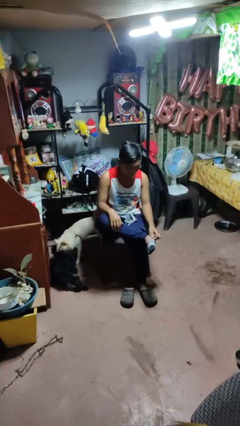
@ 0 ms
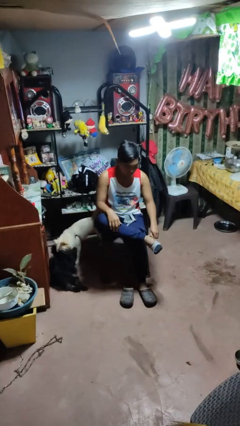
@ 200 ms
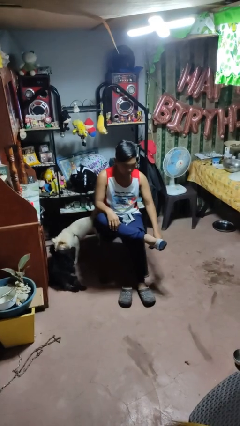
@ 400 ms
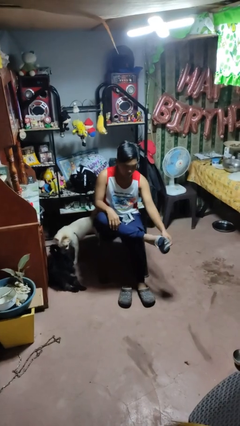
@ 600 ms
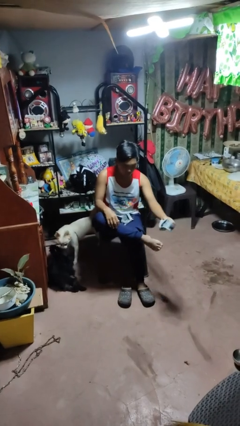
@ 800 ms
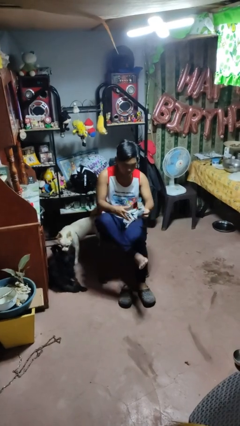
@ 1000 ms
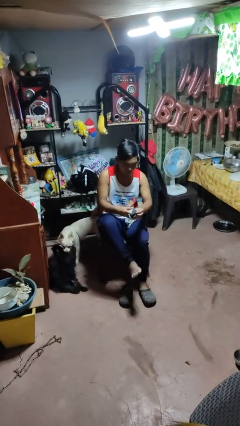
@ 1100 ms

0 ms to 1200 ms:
person takes off socks

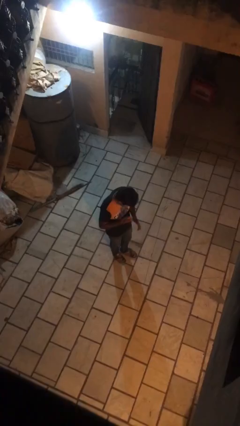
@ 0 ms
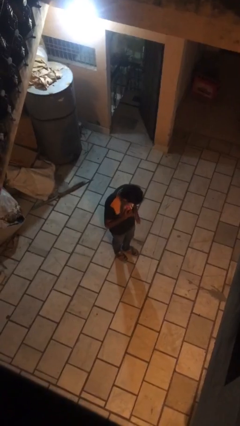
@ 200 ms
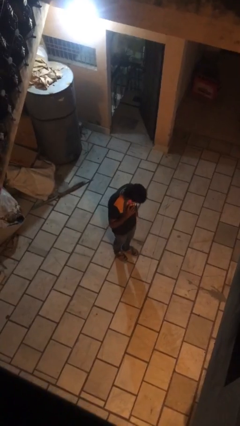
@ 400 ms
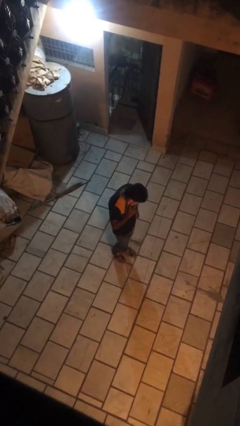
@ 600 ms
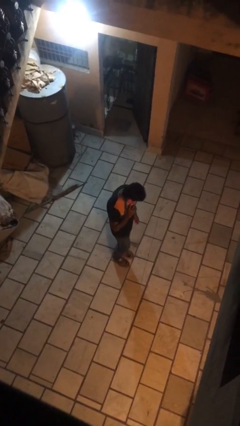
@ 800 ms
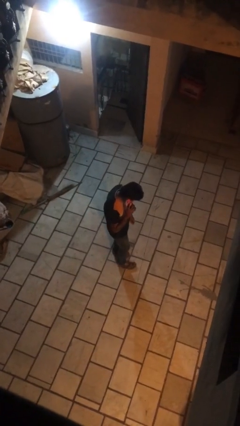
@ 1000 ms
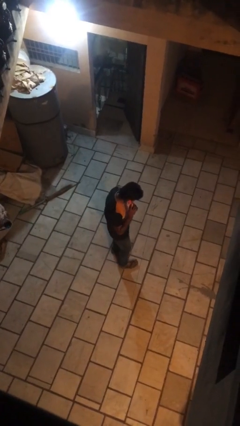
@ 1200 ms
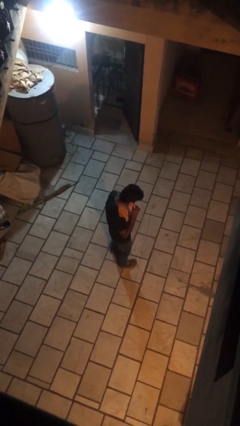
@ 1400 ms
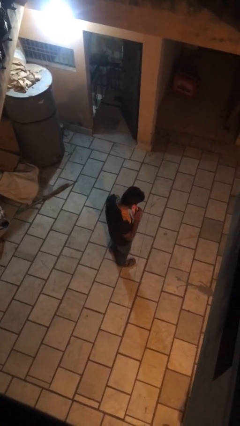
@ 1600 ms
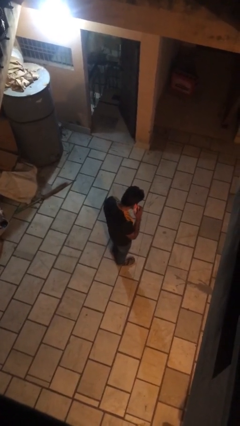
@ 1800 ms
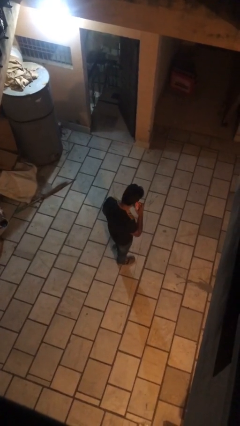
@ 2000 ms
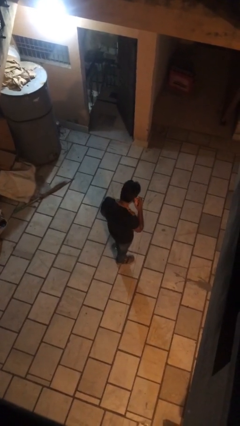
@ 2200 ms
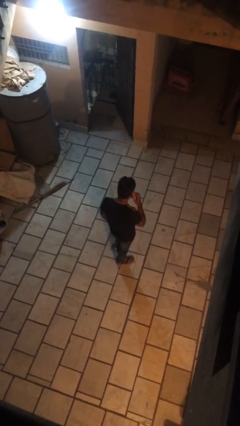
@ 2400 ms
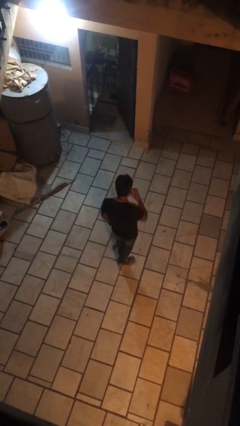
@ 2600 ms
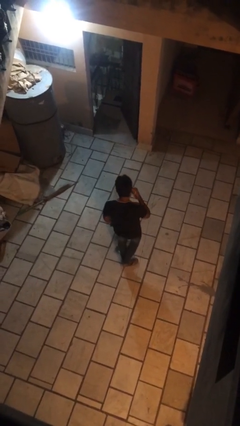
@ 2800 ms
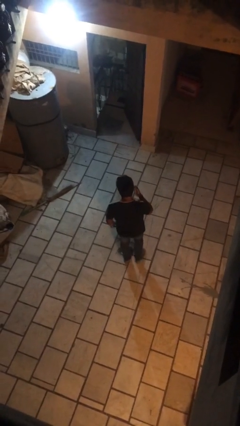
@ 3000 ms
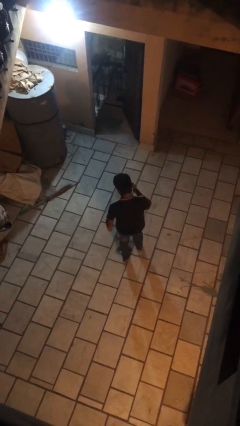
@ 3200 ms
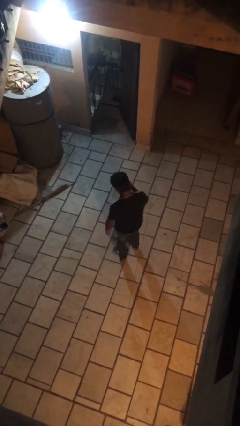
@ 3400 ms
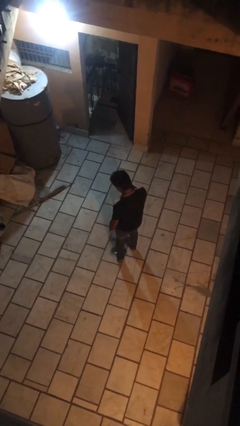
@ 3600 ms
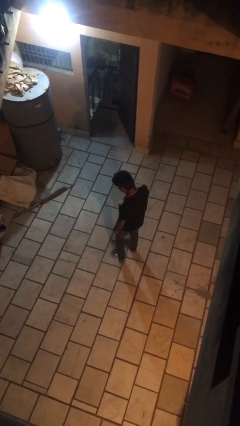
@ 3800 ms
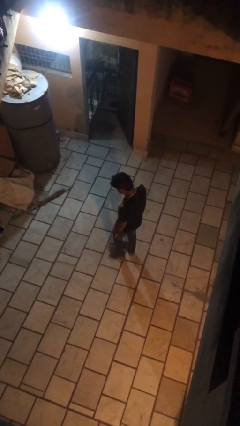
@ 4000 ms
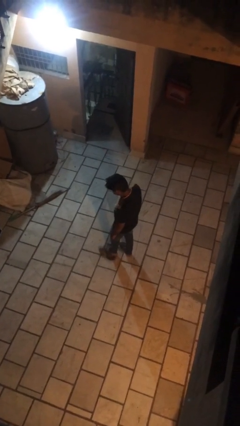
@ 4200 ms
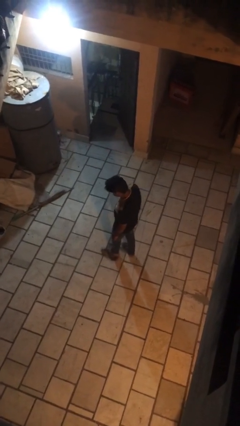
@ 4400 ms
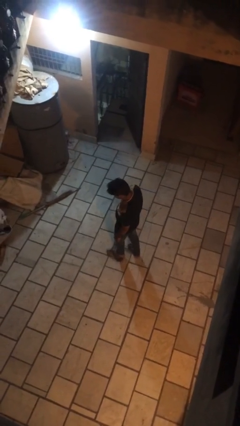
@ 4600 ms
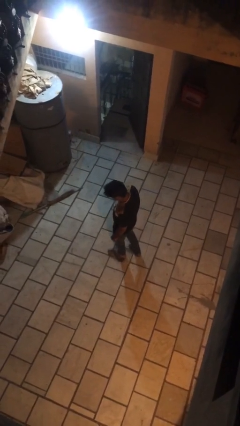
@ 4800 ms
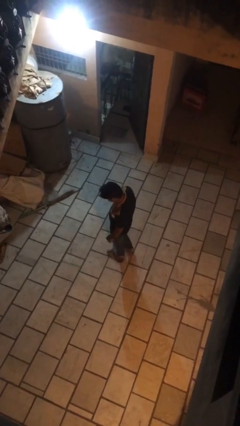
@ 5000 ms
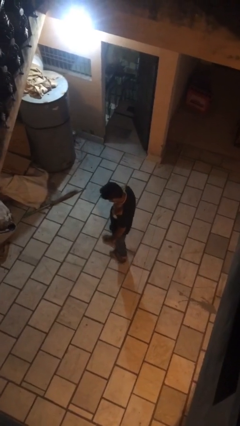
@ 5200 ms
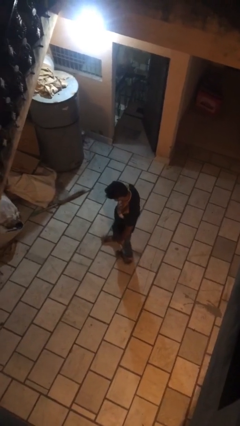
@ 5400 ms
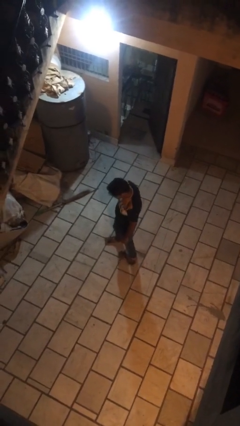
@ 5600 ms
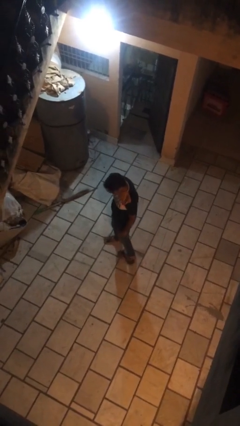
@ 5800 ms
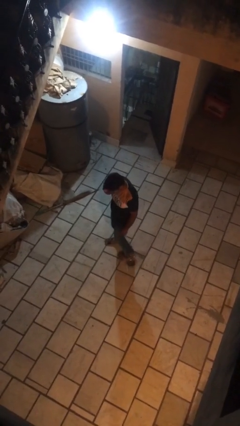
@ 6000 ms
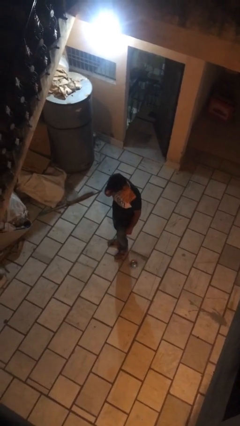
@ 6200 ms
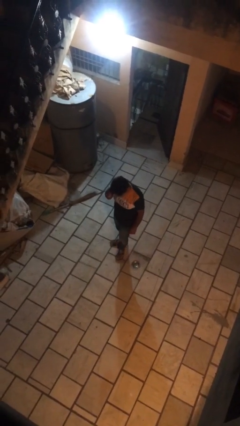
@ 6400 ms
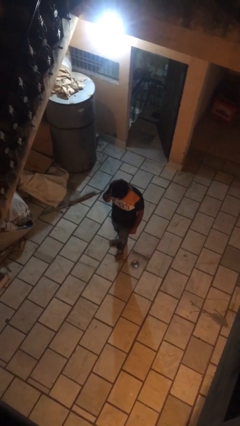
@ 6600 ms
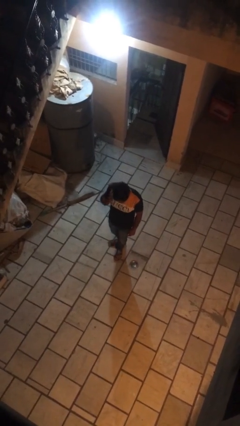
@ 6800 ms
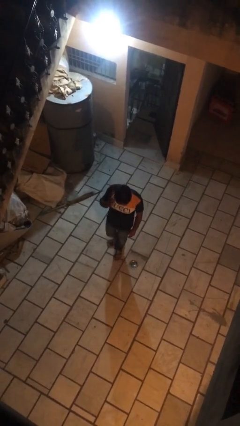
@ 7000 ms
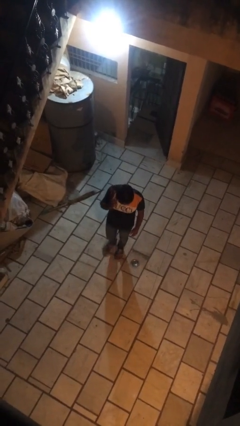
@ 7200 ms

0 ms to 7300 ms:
person talks on phone

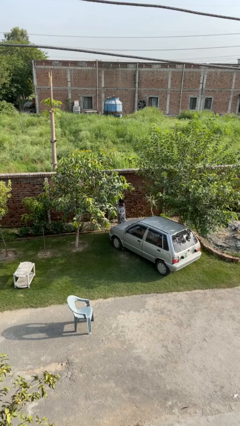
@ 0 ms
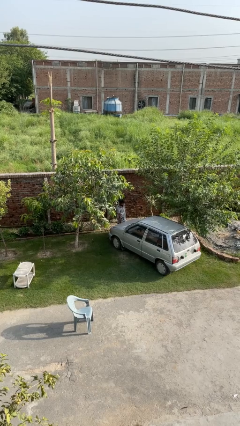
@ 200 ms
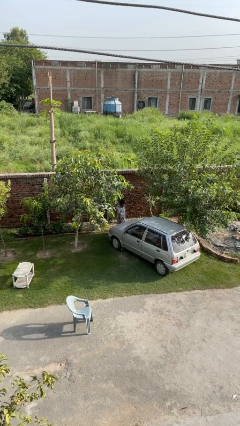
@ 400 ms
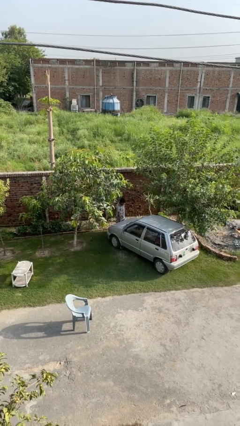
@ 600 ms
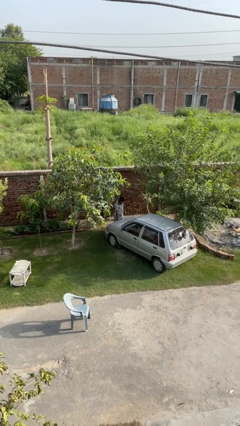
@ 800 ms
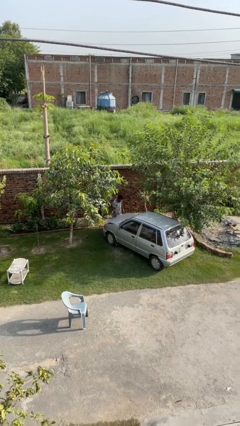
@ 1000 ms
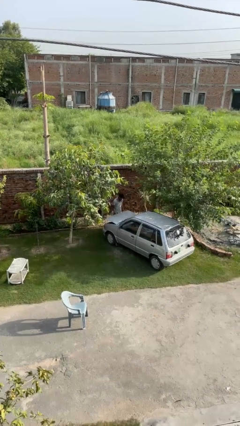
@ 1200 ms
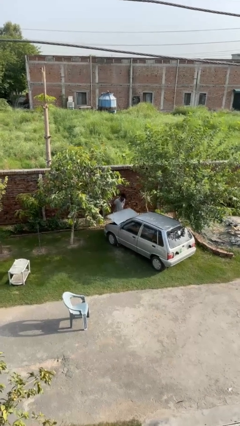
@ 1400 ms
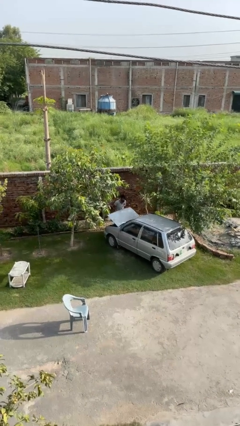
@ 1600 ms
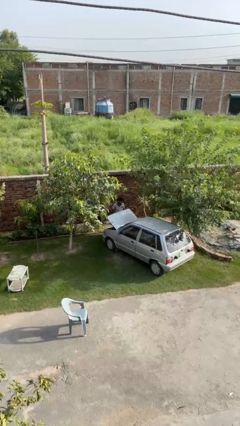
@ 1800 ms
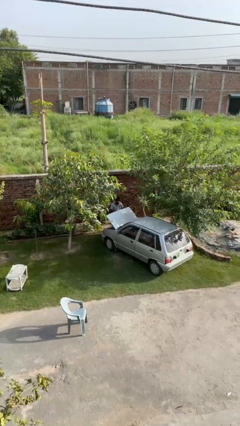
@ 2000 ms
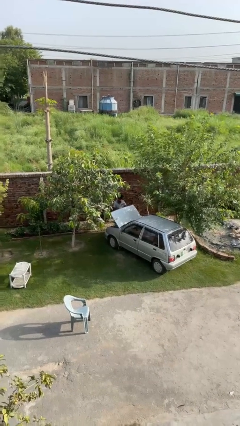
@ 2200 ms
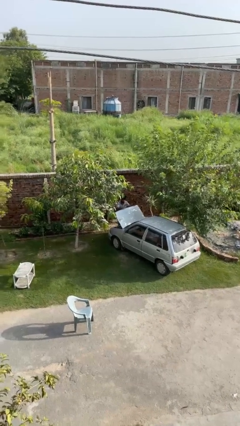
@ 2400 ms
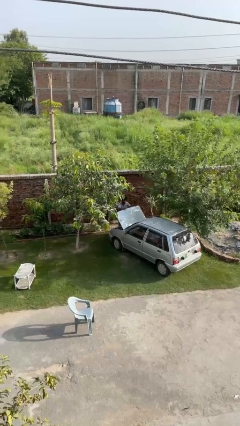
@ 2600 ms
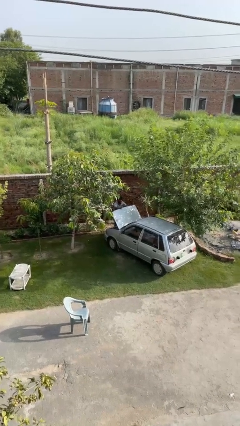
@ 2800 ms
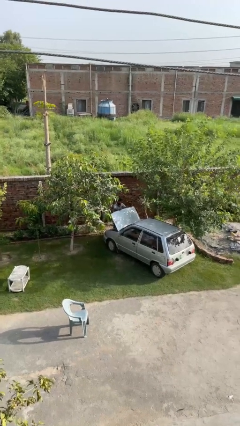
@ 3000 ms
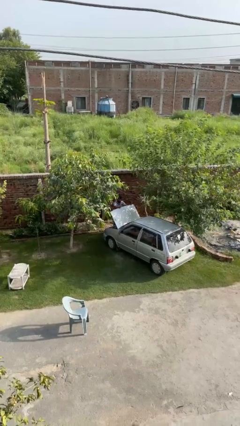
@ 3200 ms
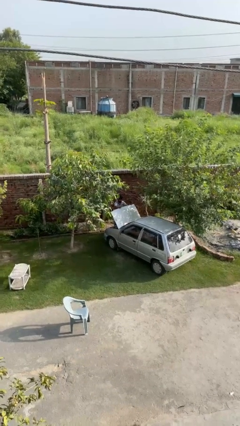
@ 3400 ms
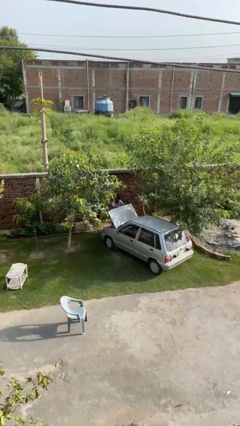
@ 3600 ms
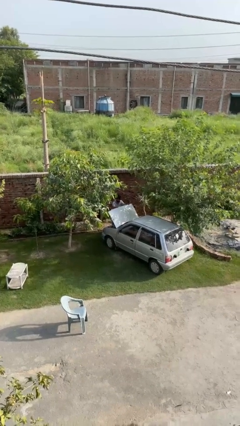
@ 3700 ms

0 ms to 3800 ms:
person opens car hood

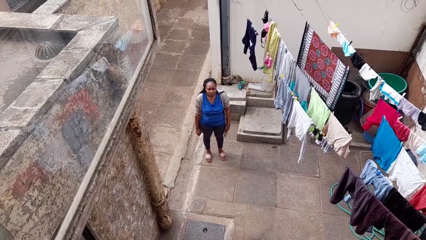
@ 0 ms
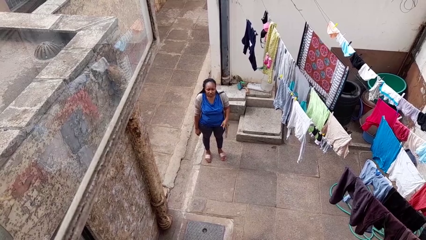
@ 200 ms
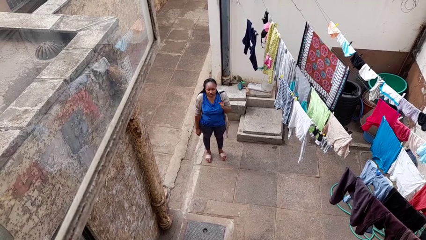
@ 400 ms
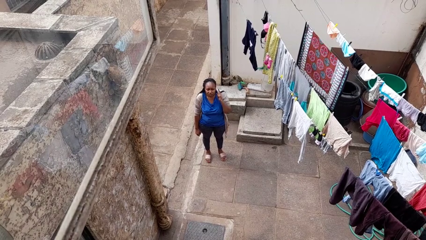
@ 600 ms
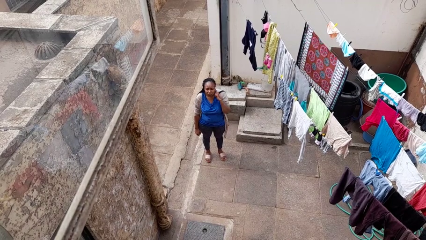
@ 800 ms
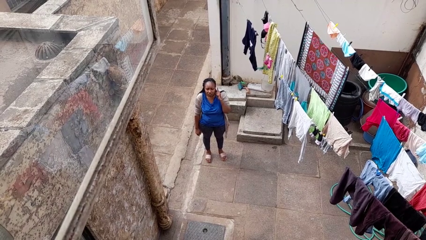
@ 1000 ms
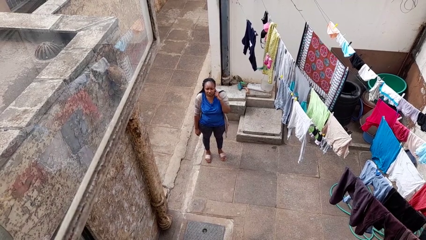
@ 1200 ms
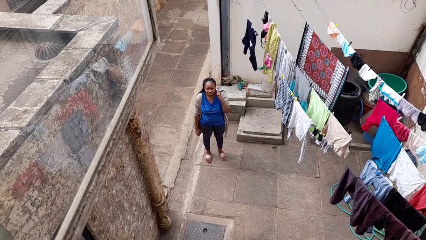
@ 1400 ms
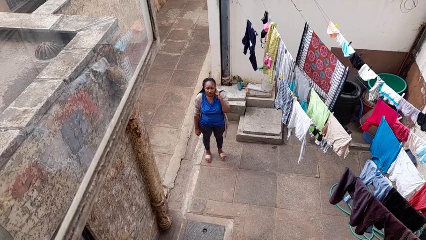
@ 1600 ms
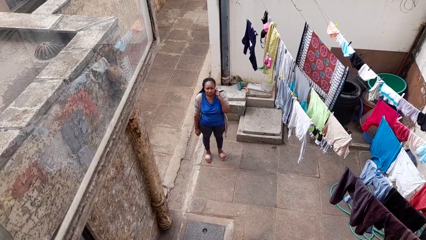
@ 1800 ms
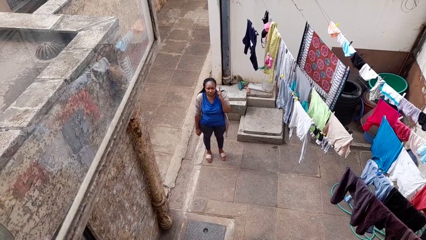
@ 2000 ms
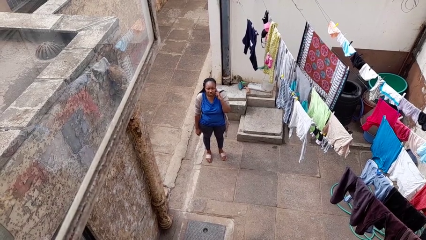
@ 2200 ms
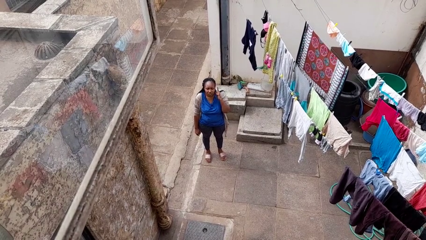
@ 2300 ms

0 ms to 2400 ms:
person gestures listen closely

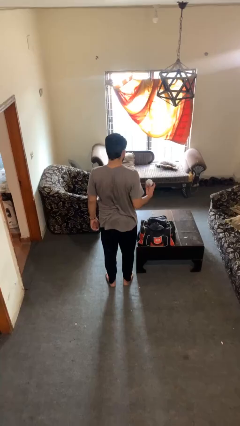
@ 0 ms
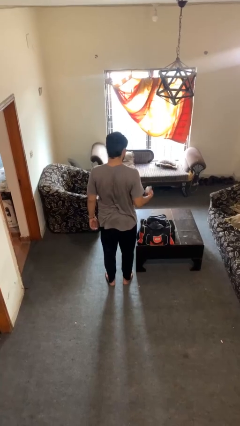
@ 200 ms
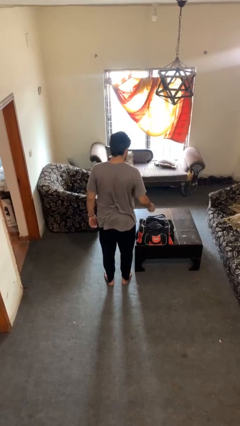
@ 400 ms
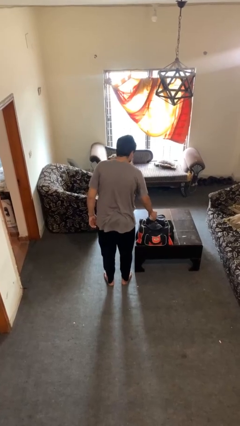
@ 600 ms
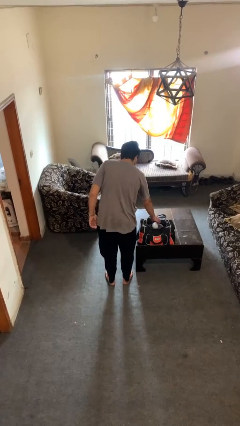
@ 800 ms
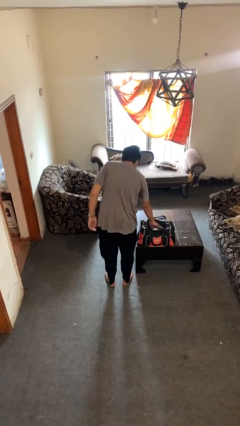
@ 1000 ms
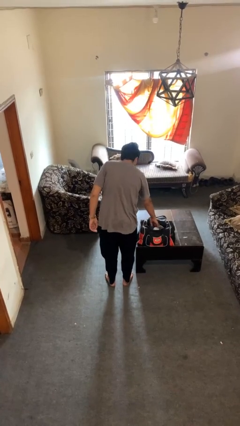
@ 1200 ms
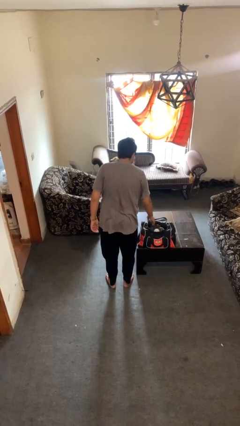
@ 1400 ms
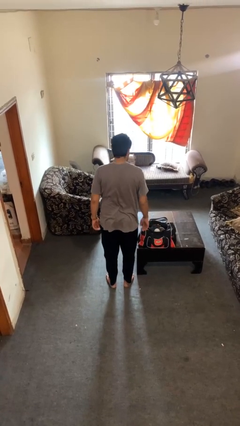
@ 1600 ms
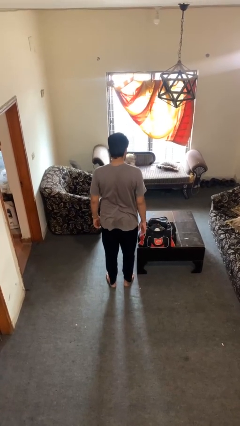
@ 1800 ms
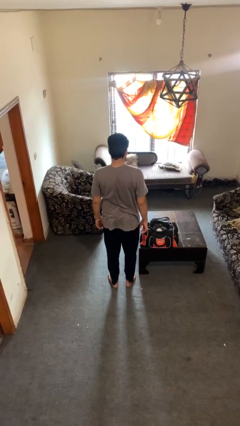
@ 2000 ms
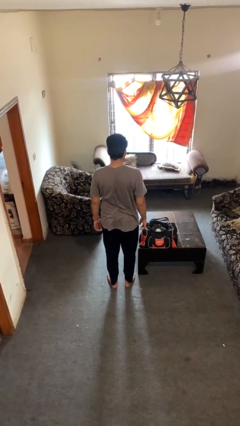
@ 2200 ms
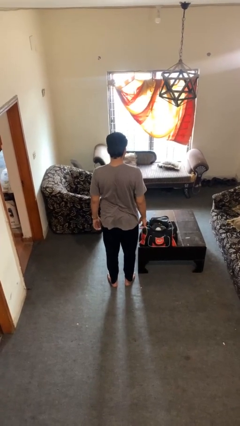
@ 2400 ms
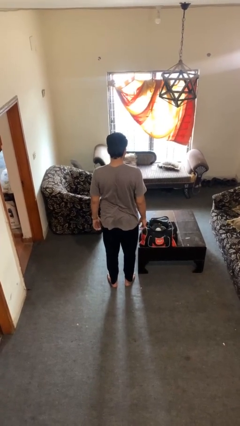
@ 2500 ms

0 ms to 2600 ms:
person puts object into bag
